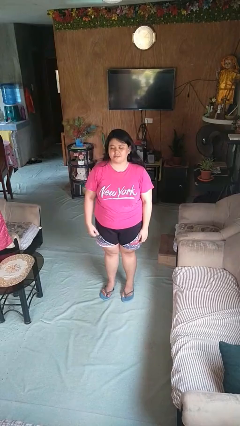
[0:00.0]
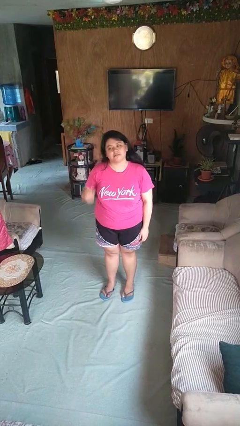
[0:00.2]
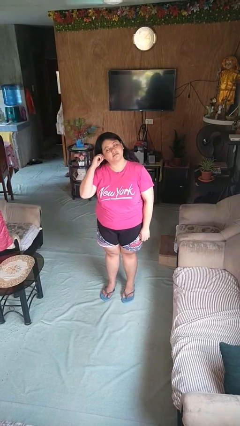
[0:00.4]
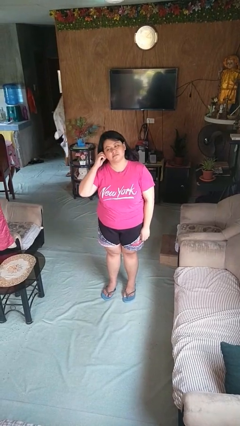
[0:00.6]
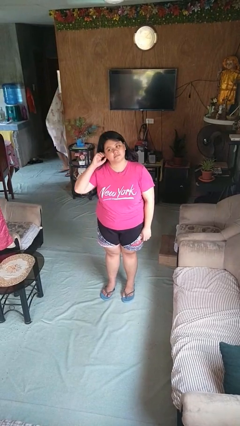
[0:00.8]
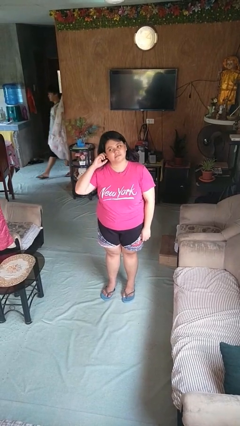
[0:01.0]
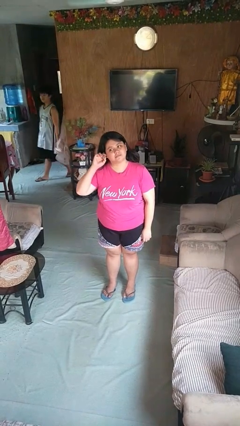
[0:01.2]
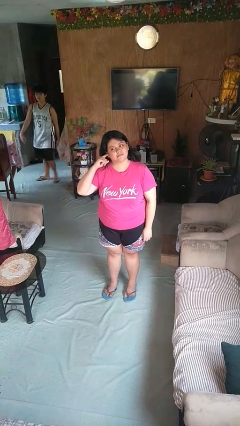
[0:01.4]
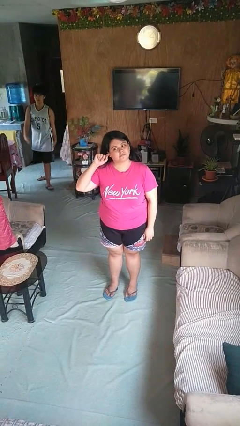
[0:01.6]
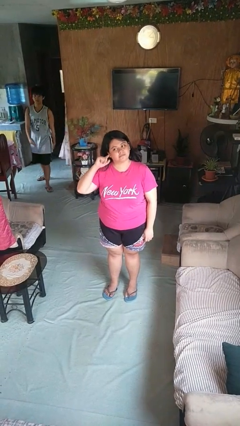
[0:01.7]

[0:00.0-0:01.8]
person touches earlobe

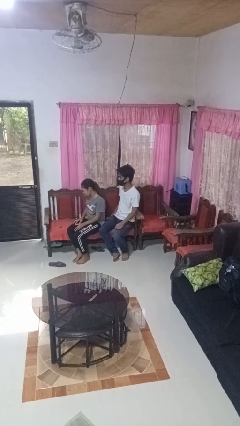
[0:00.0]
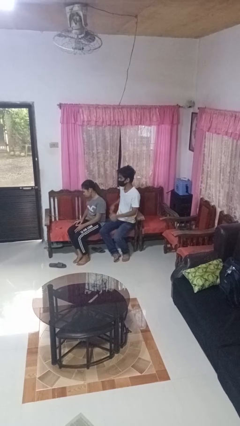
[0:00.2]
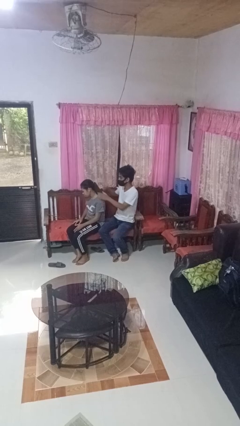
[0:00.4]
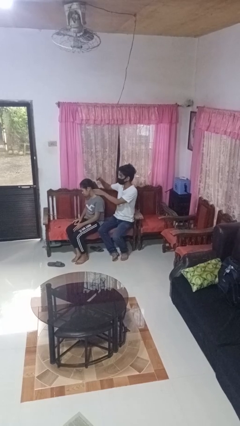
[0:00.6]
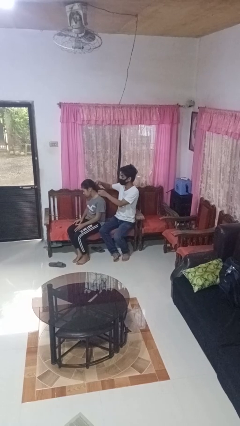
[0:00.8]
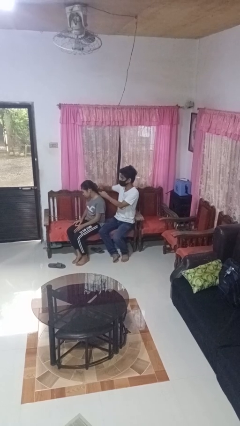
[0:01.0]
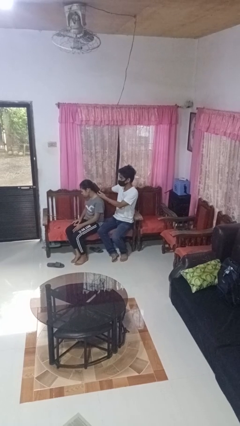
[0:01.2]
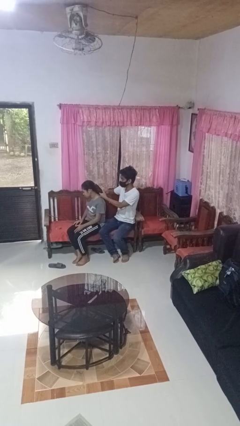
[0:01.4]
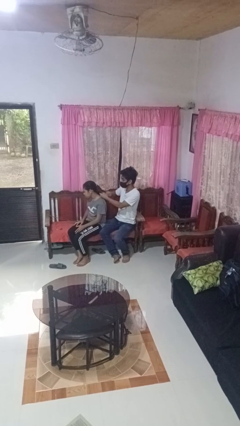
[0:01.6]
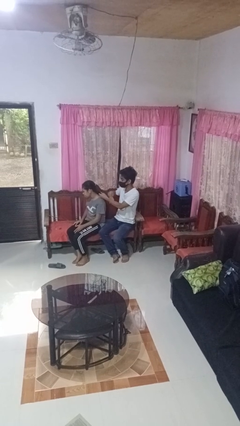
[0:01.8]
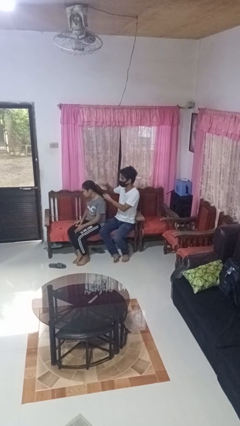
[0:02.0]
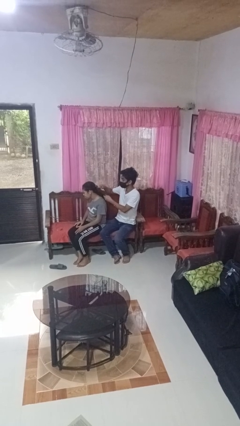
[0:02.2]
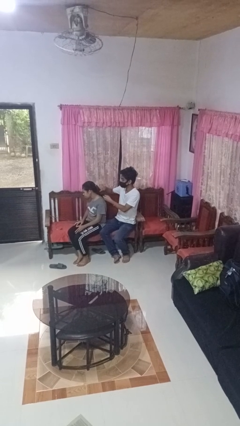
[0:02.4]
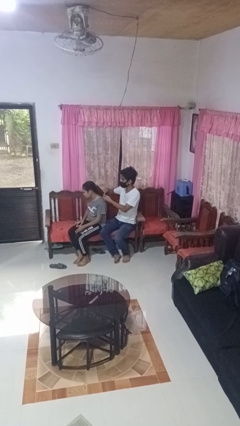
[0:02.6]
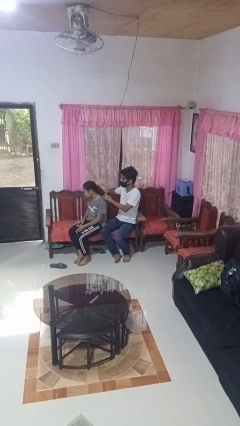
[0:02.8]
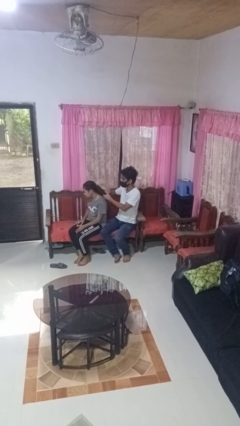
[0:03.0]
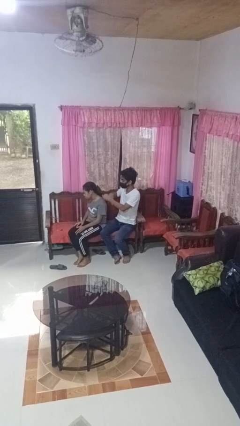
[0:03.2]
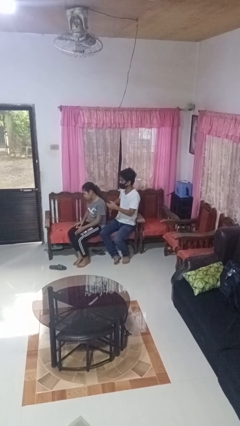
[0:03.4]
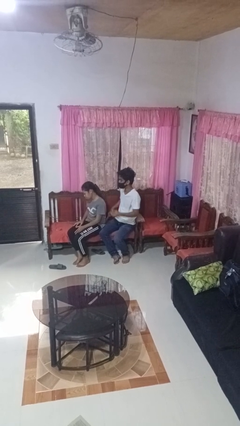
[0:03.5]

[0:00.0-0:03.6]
person brushes hair of person

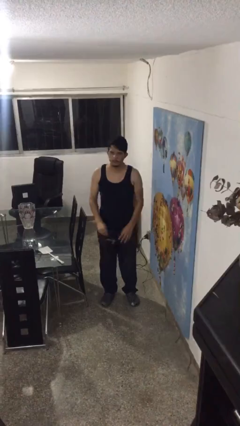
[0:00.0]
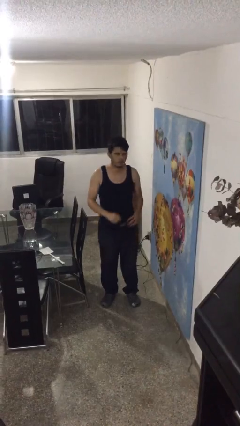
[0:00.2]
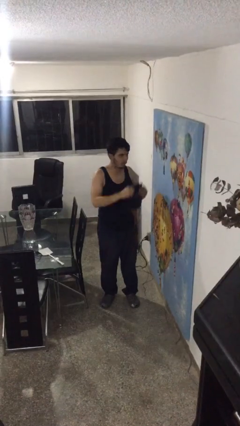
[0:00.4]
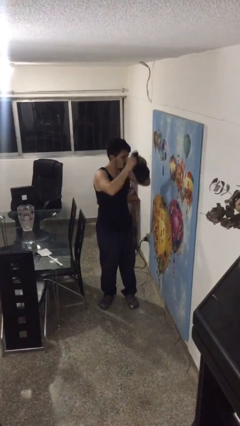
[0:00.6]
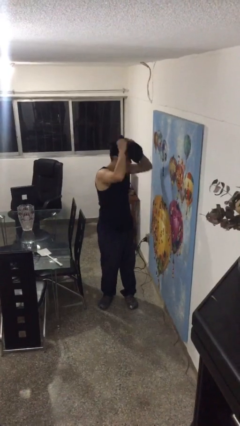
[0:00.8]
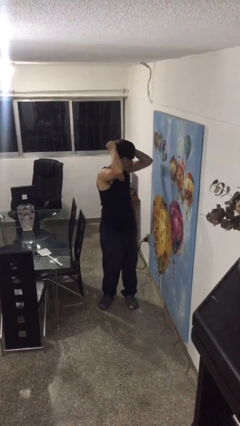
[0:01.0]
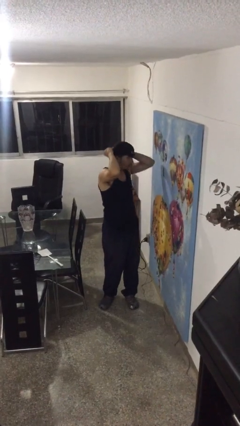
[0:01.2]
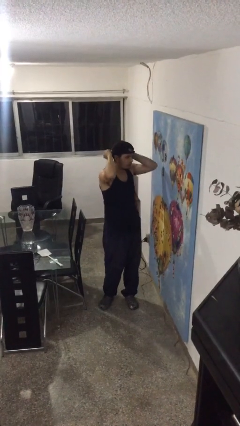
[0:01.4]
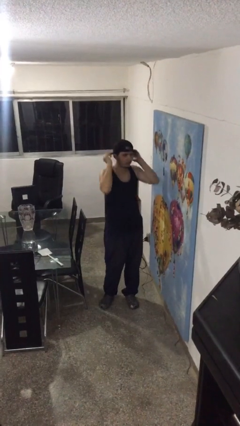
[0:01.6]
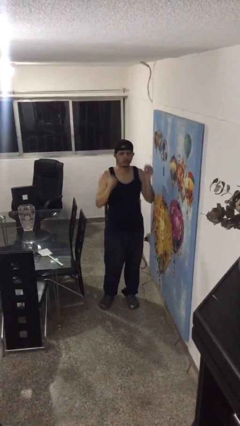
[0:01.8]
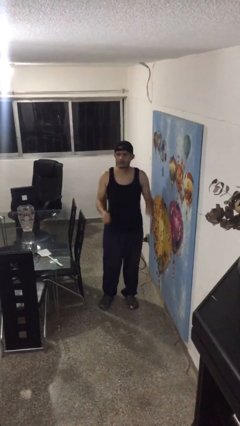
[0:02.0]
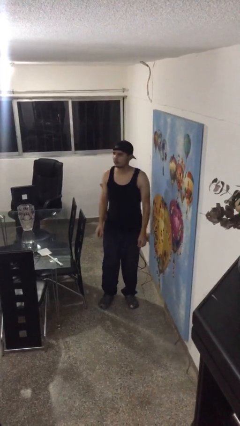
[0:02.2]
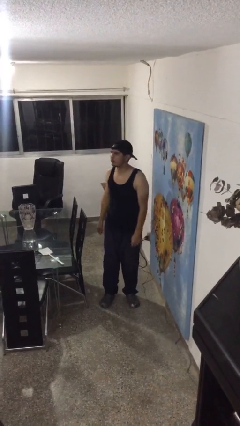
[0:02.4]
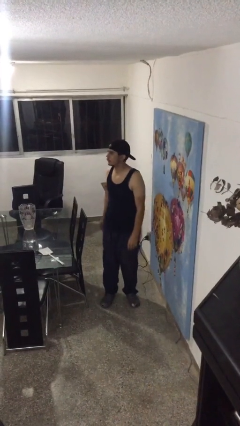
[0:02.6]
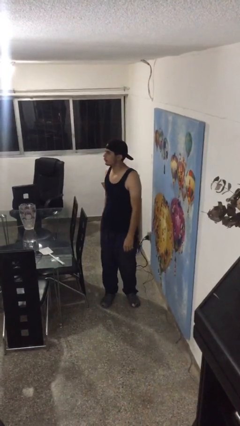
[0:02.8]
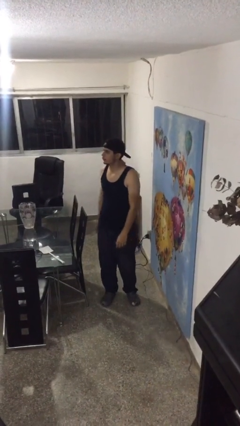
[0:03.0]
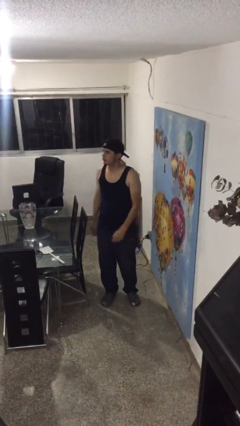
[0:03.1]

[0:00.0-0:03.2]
person puts on hat

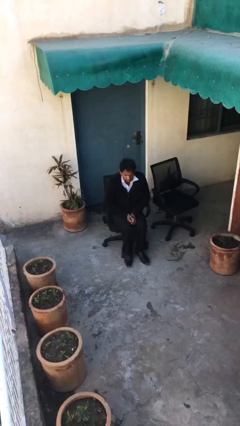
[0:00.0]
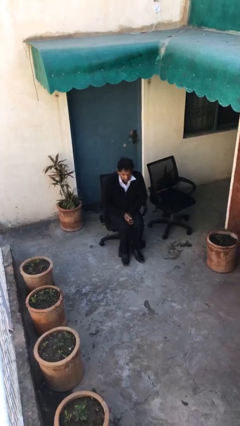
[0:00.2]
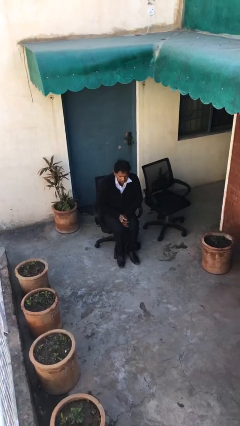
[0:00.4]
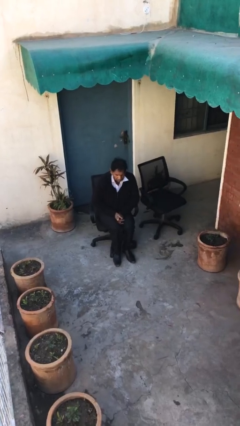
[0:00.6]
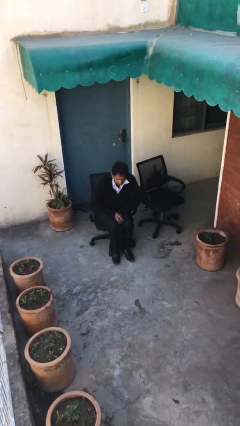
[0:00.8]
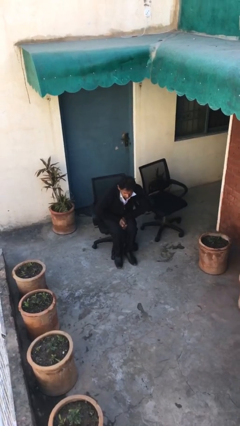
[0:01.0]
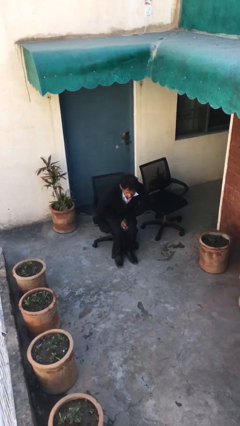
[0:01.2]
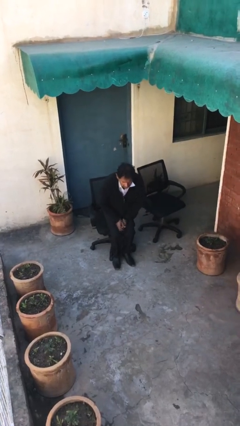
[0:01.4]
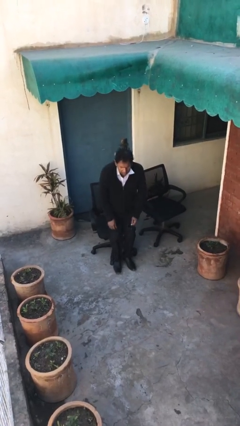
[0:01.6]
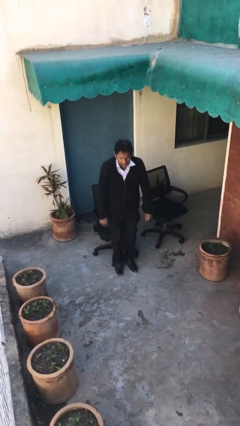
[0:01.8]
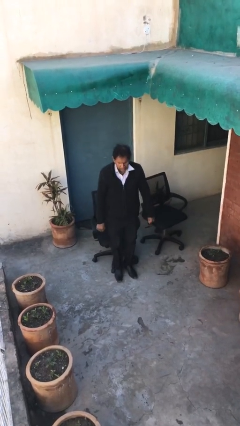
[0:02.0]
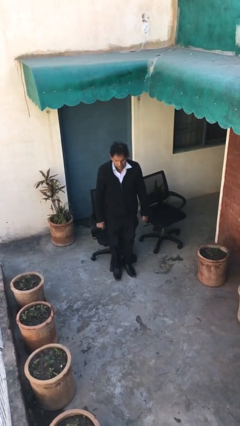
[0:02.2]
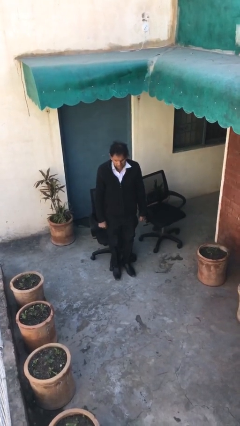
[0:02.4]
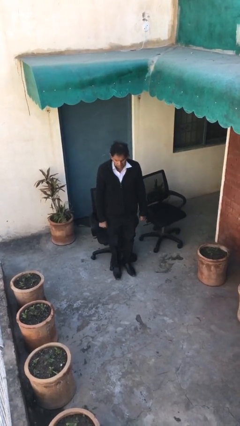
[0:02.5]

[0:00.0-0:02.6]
person stands up

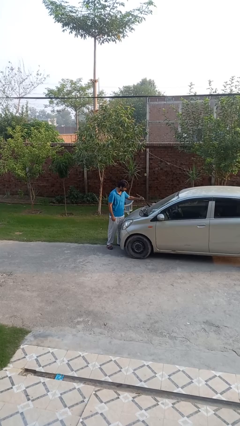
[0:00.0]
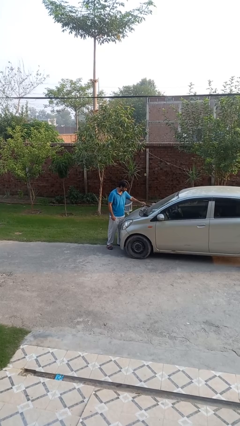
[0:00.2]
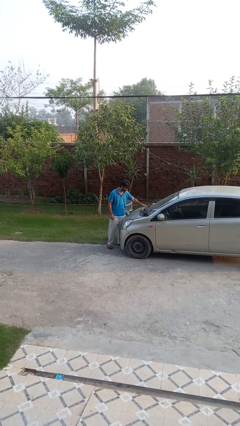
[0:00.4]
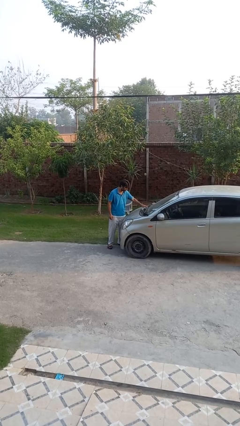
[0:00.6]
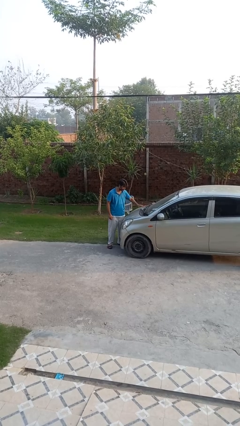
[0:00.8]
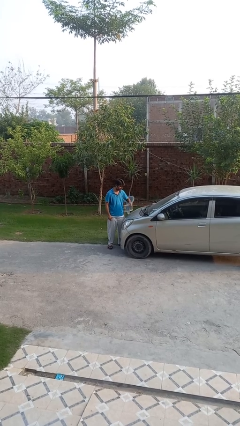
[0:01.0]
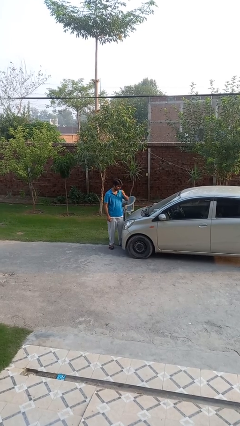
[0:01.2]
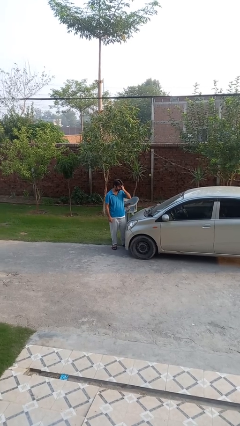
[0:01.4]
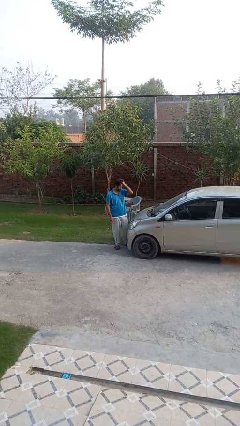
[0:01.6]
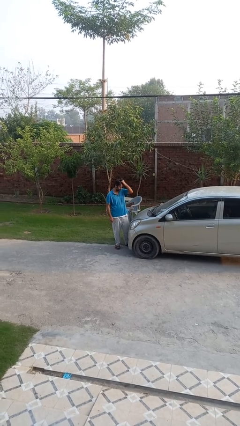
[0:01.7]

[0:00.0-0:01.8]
person flips down car wipers

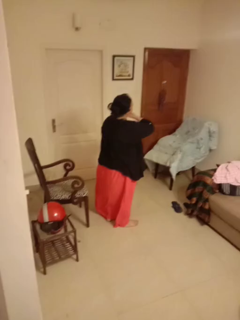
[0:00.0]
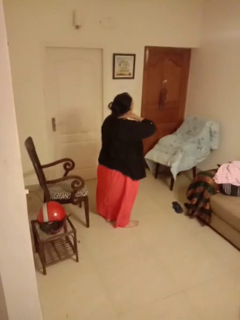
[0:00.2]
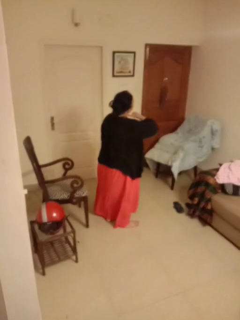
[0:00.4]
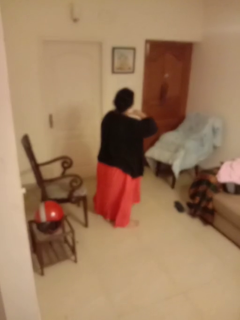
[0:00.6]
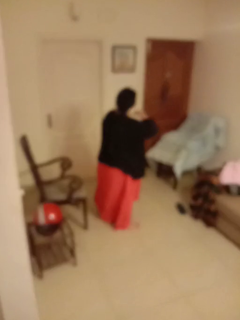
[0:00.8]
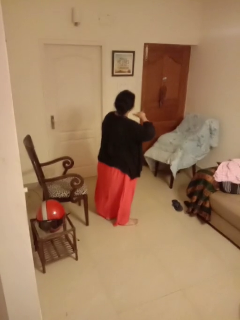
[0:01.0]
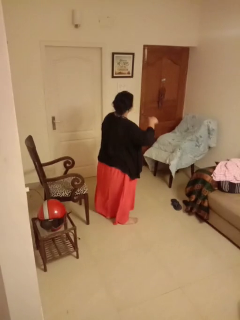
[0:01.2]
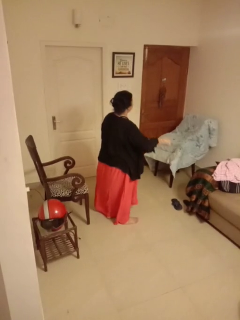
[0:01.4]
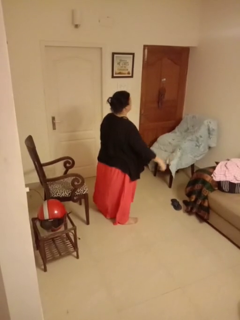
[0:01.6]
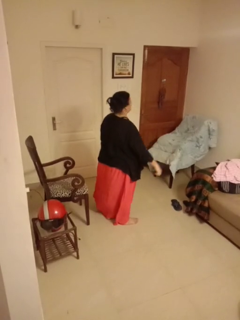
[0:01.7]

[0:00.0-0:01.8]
person gestures cut

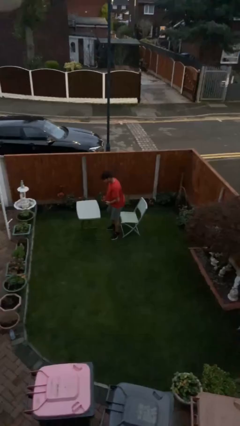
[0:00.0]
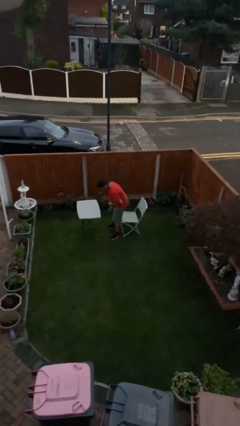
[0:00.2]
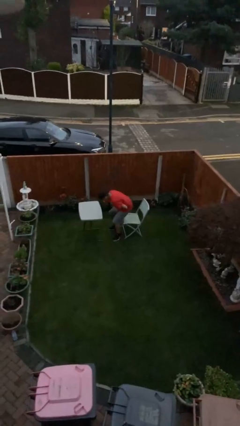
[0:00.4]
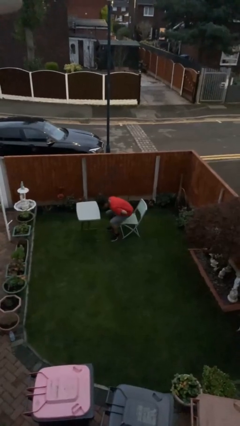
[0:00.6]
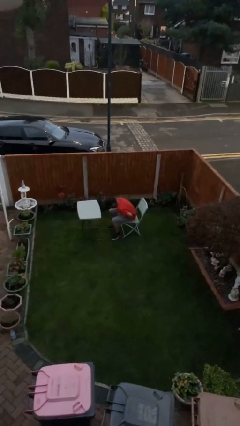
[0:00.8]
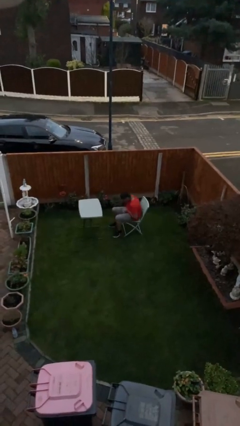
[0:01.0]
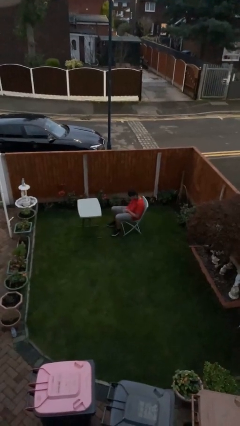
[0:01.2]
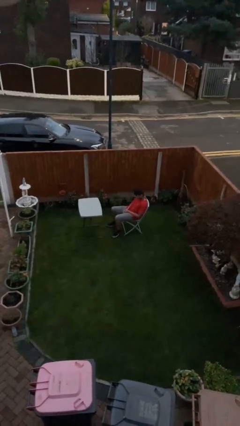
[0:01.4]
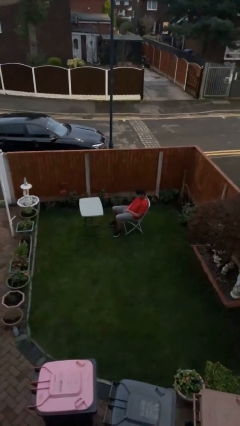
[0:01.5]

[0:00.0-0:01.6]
person sits down

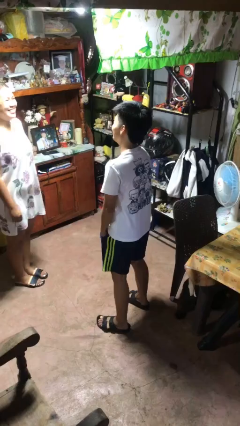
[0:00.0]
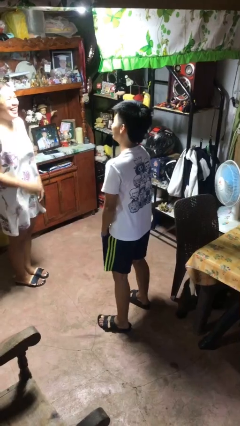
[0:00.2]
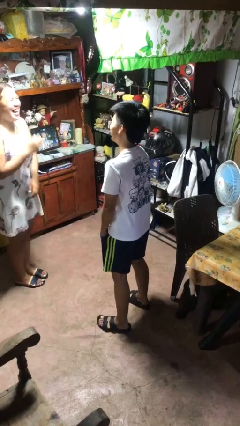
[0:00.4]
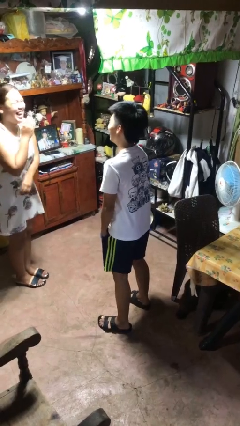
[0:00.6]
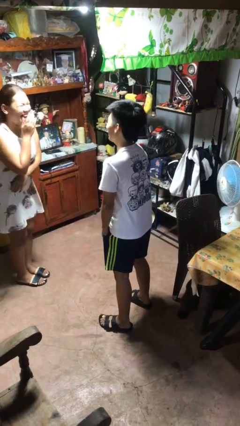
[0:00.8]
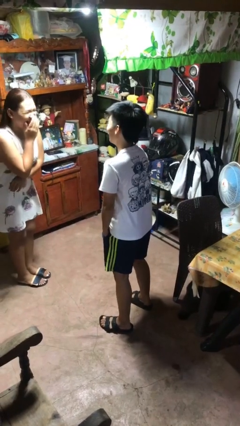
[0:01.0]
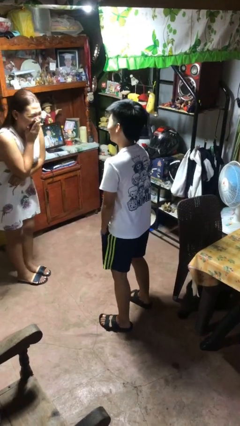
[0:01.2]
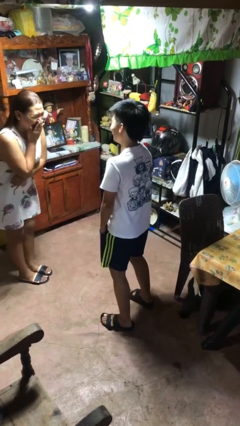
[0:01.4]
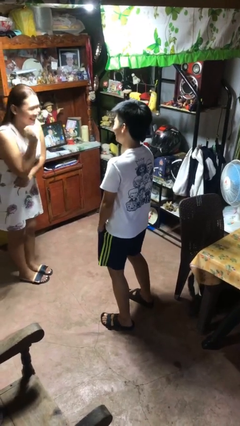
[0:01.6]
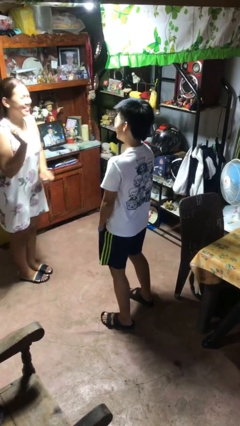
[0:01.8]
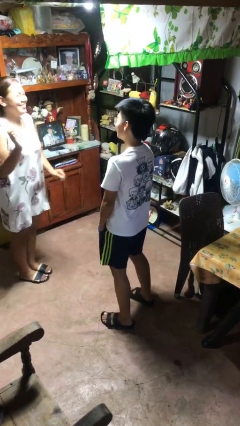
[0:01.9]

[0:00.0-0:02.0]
person laughs with person
